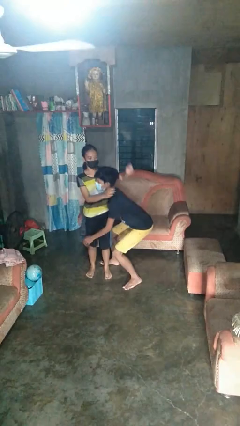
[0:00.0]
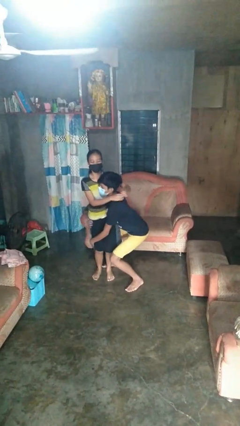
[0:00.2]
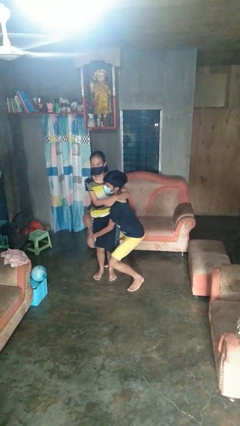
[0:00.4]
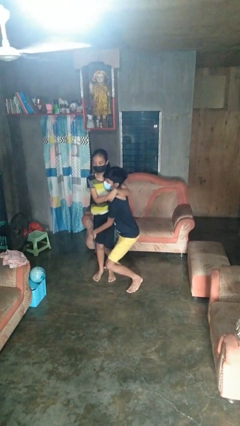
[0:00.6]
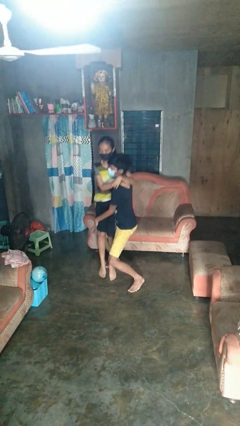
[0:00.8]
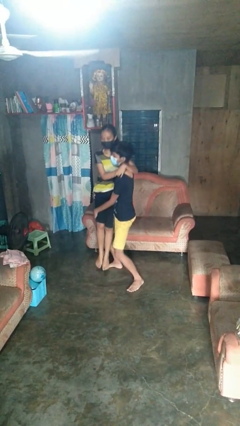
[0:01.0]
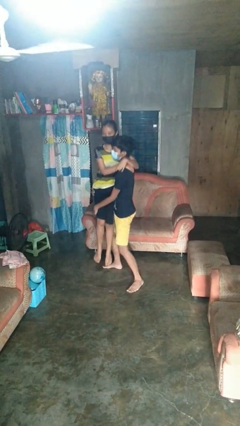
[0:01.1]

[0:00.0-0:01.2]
person picks up person

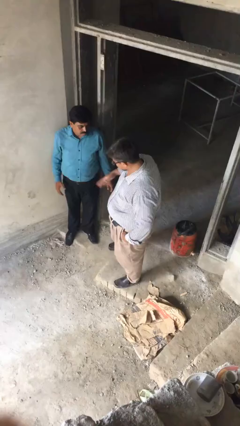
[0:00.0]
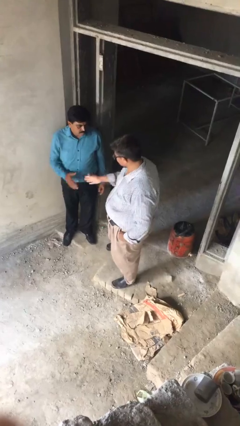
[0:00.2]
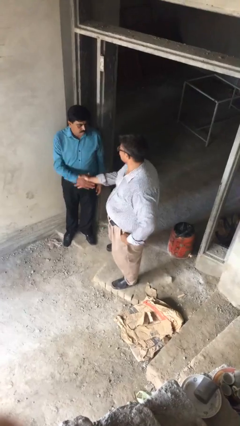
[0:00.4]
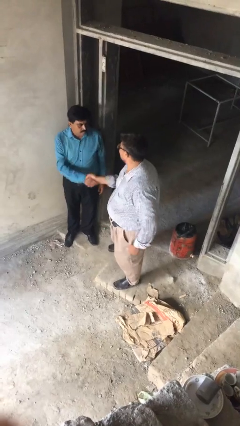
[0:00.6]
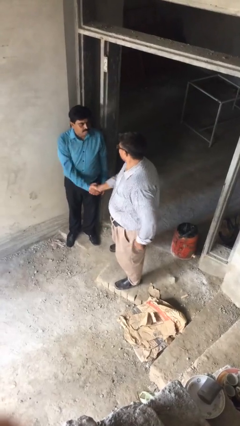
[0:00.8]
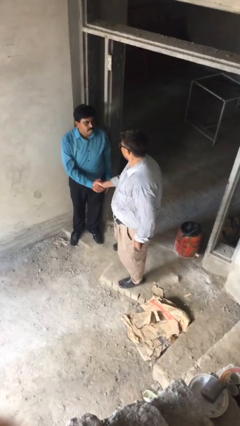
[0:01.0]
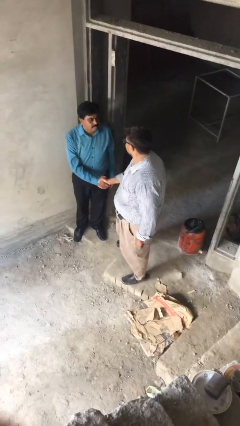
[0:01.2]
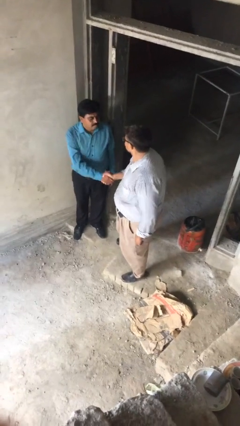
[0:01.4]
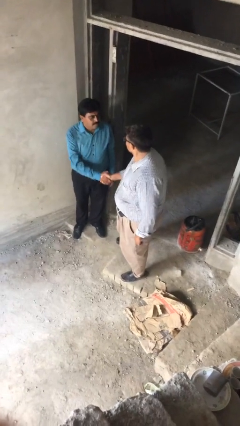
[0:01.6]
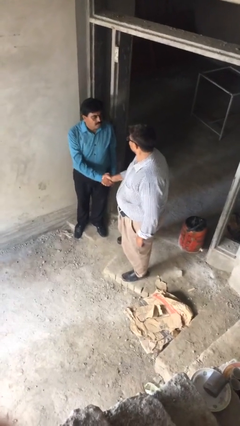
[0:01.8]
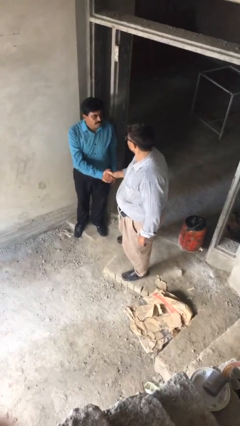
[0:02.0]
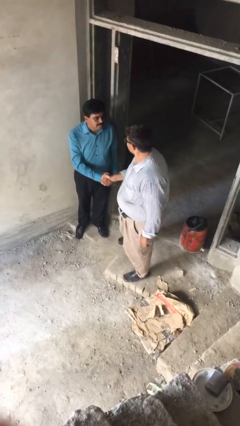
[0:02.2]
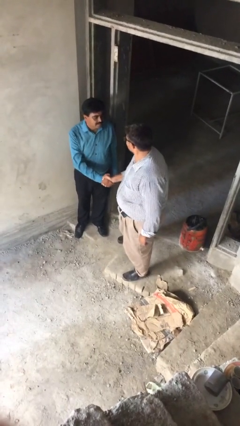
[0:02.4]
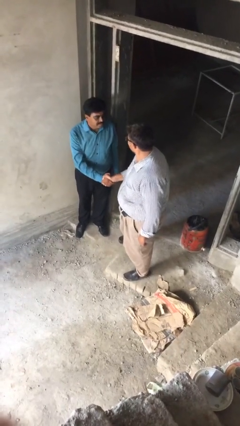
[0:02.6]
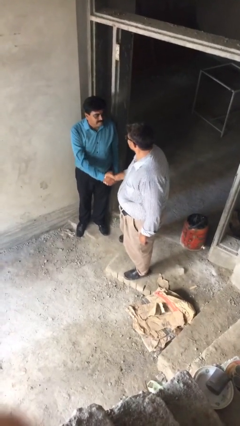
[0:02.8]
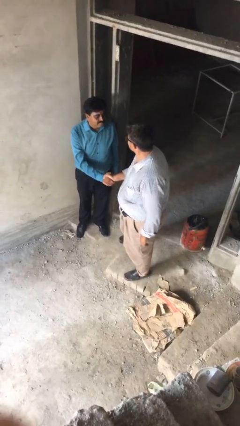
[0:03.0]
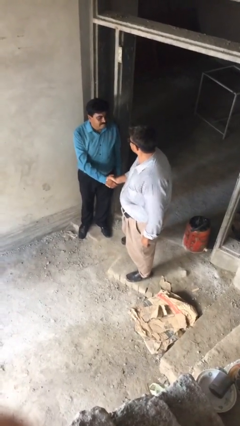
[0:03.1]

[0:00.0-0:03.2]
person shakes hand

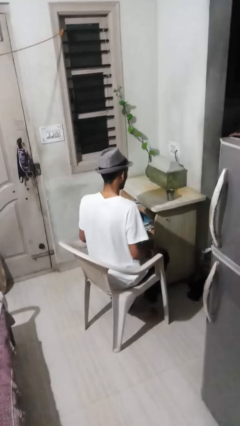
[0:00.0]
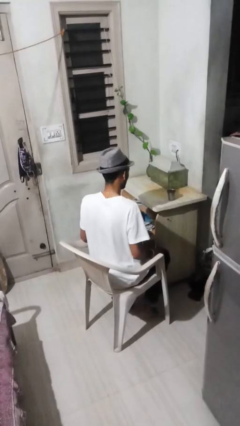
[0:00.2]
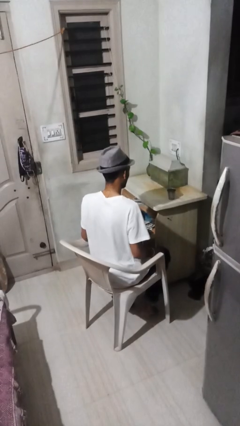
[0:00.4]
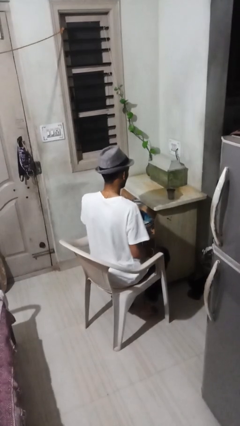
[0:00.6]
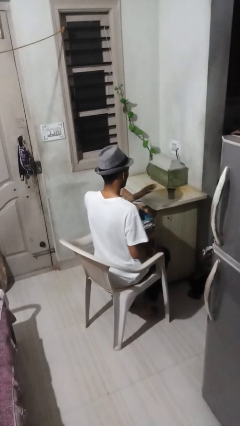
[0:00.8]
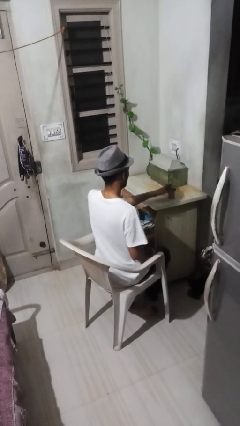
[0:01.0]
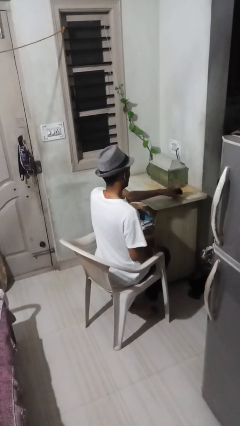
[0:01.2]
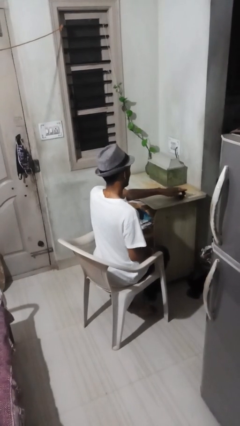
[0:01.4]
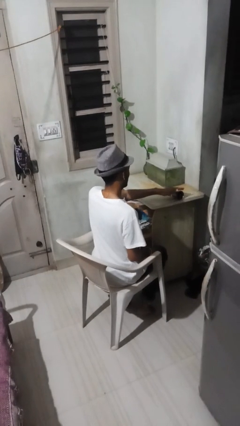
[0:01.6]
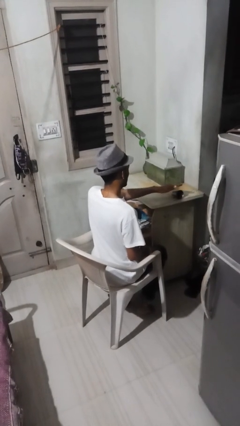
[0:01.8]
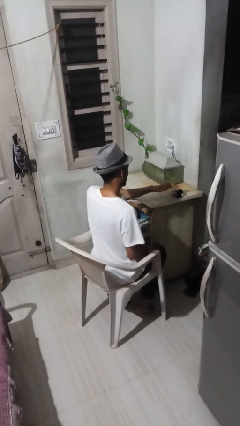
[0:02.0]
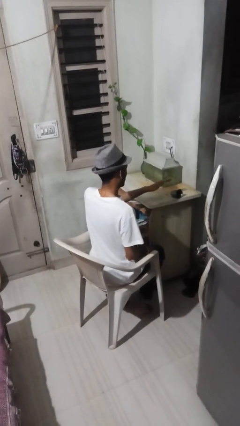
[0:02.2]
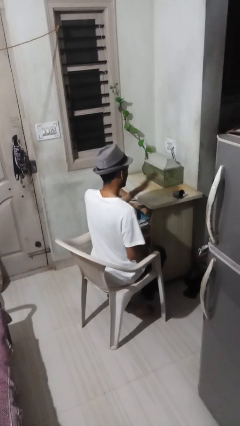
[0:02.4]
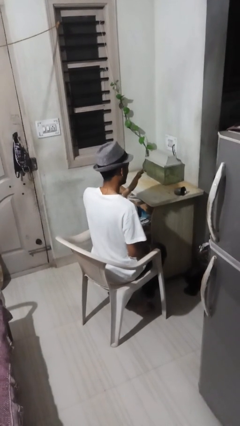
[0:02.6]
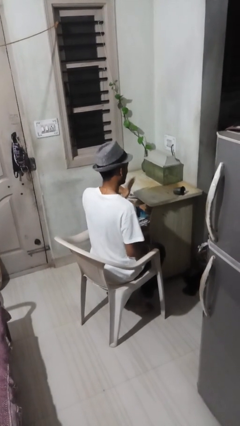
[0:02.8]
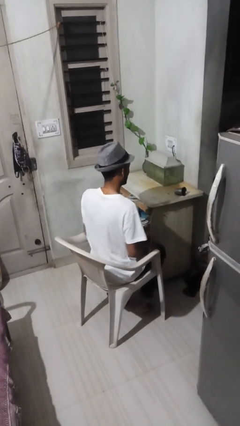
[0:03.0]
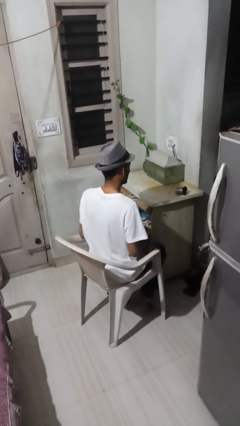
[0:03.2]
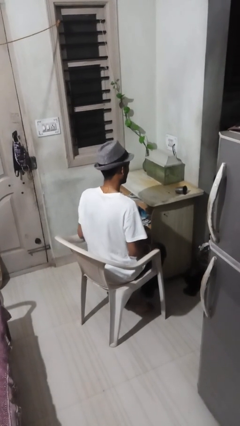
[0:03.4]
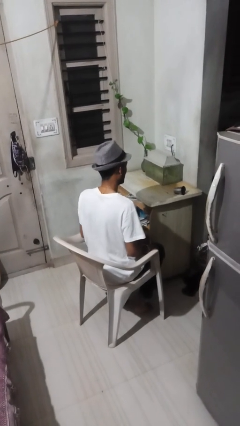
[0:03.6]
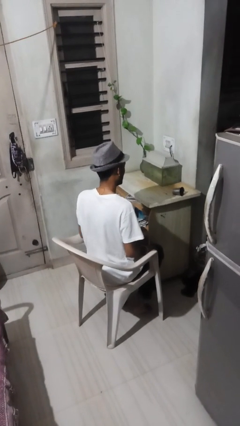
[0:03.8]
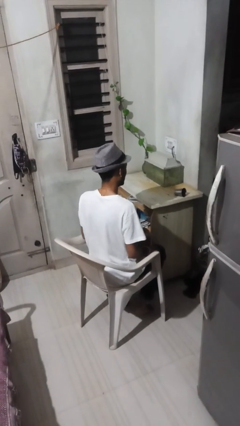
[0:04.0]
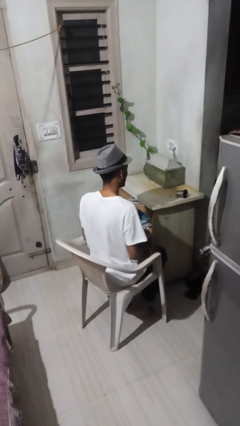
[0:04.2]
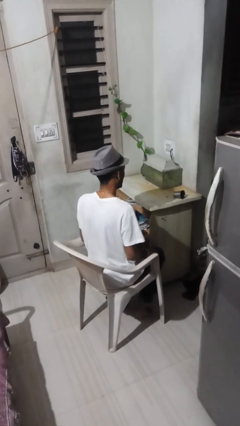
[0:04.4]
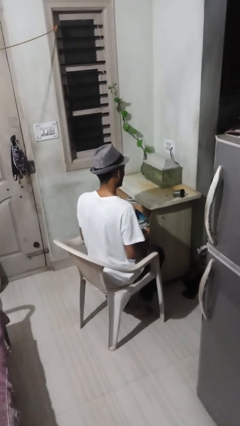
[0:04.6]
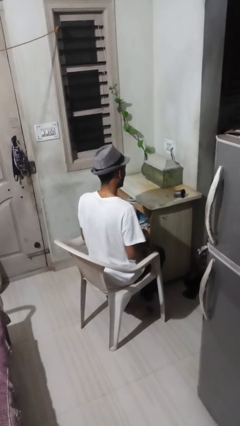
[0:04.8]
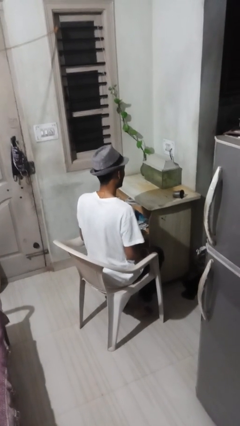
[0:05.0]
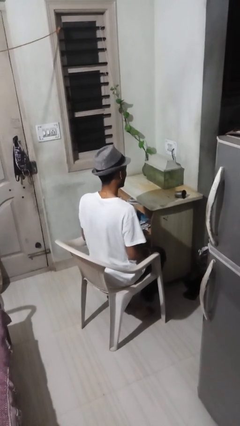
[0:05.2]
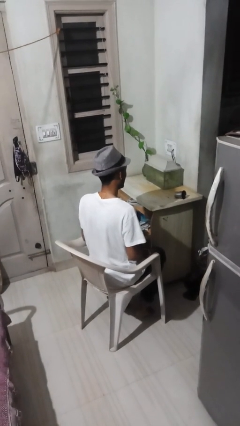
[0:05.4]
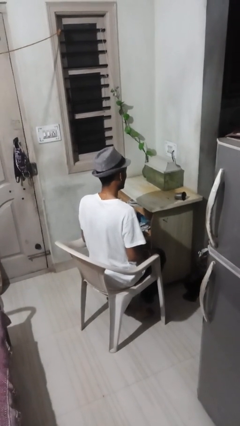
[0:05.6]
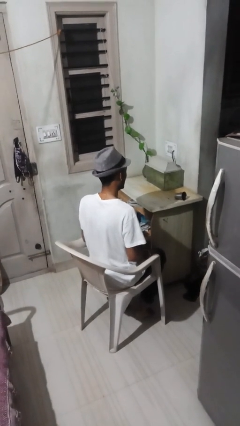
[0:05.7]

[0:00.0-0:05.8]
person spills on table

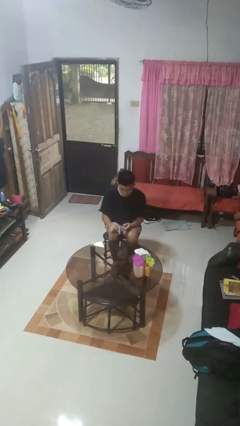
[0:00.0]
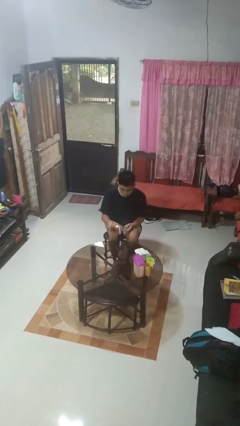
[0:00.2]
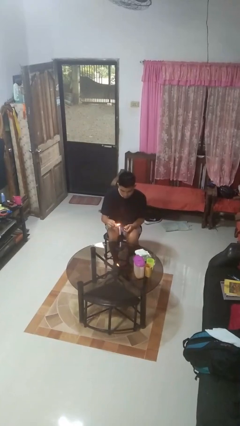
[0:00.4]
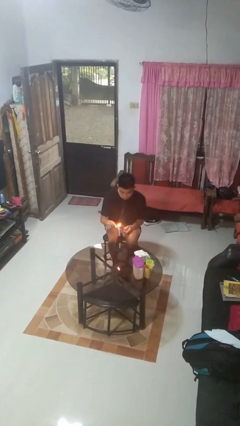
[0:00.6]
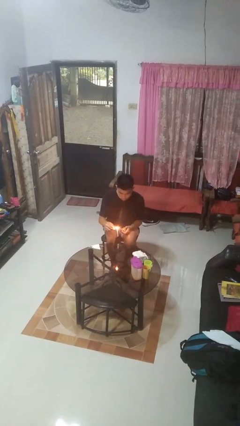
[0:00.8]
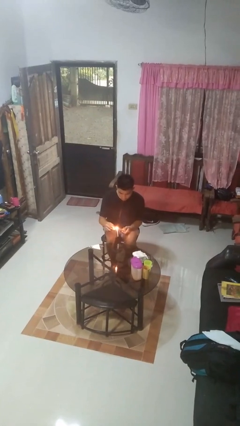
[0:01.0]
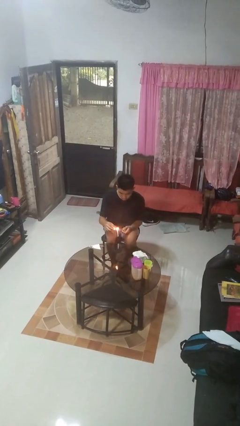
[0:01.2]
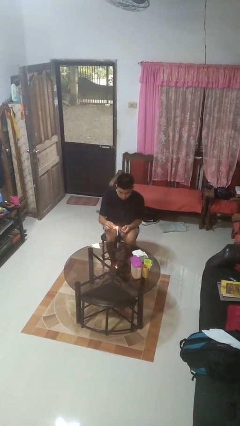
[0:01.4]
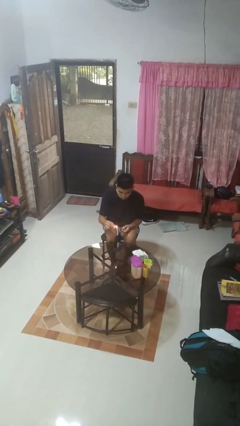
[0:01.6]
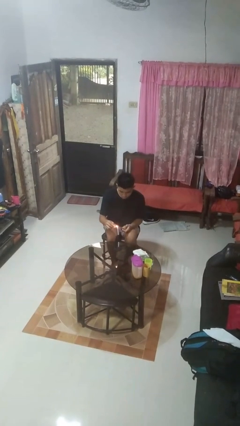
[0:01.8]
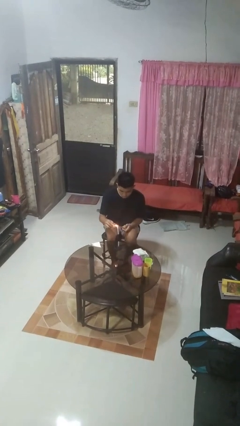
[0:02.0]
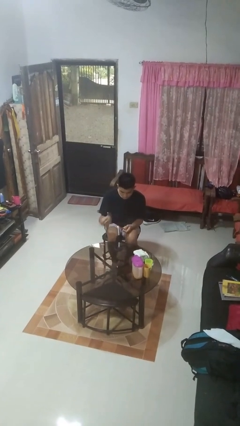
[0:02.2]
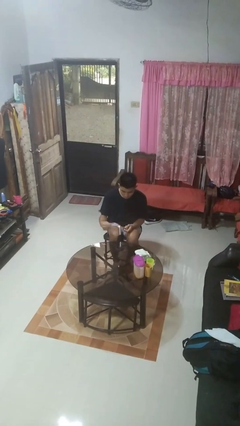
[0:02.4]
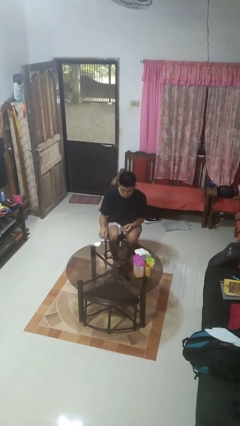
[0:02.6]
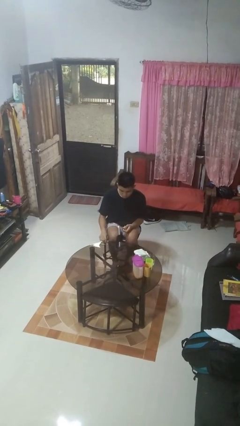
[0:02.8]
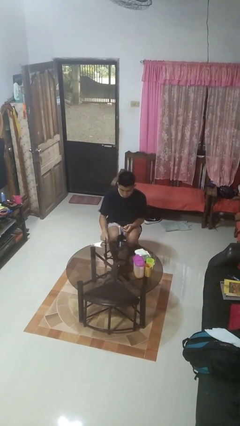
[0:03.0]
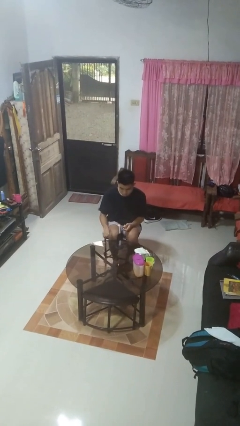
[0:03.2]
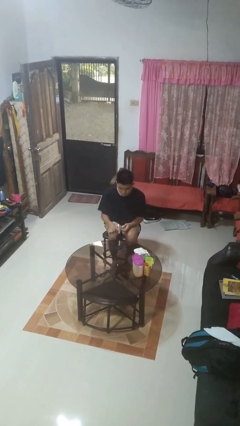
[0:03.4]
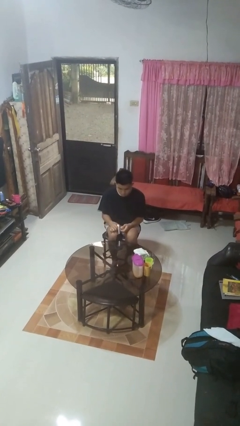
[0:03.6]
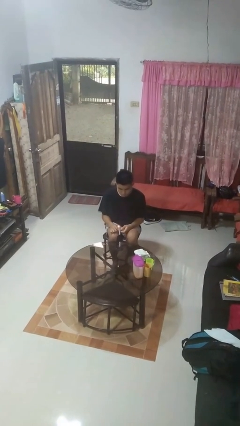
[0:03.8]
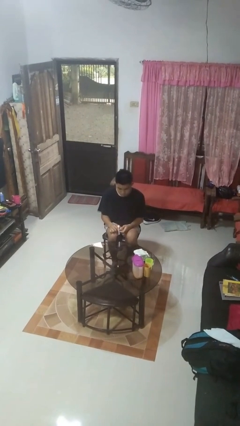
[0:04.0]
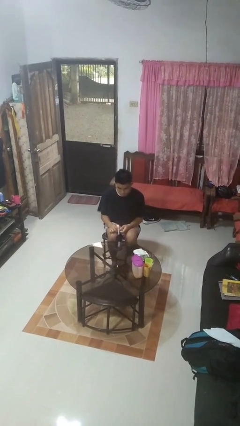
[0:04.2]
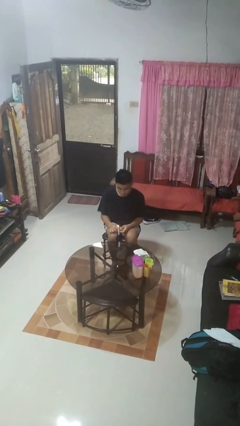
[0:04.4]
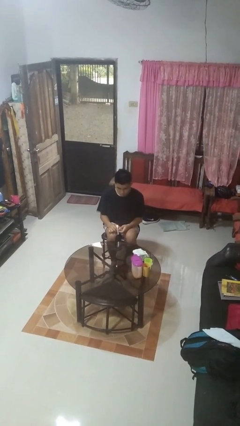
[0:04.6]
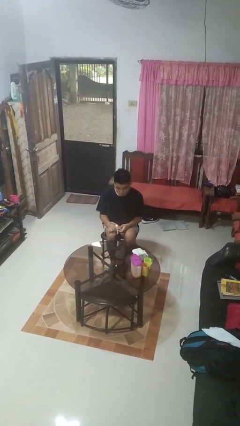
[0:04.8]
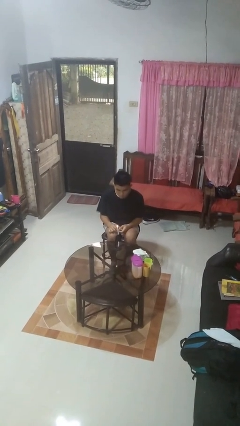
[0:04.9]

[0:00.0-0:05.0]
person lights candle

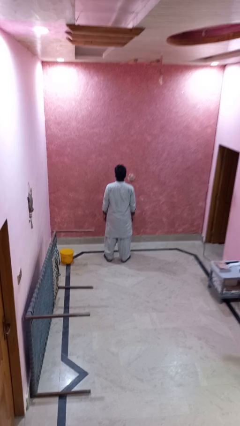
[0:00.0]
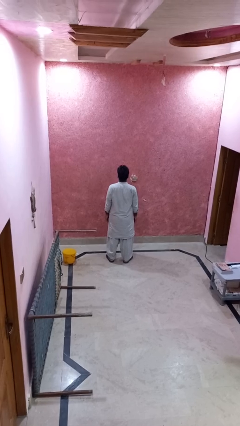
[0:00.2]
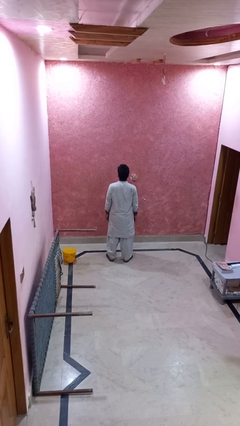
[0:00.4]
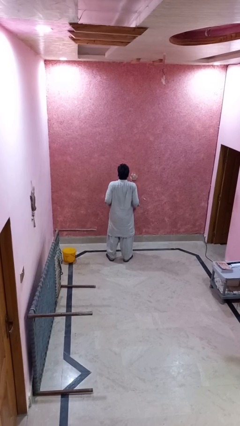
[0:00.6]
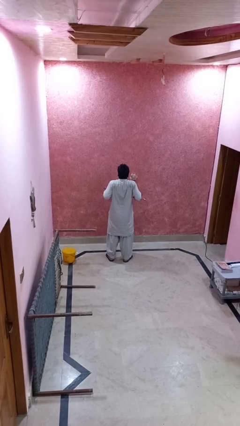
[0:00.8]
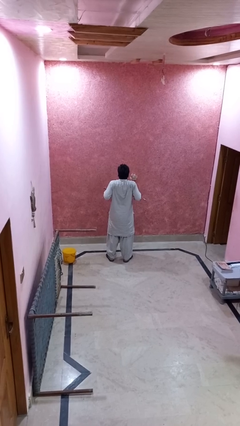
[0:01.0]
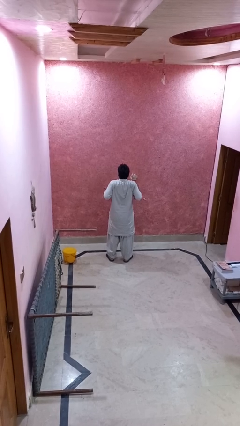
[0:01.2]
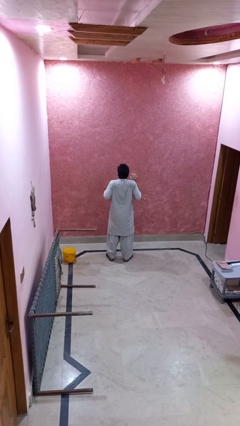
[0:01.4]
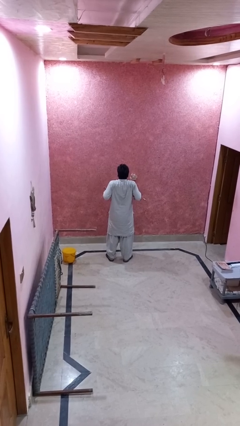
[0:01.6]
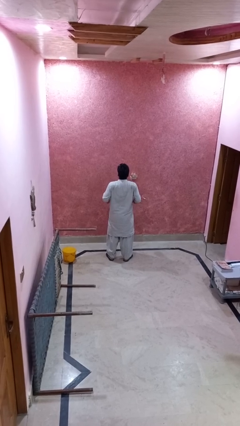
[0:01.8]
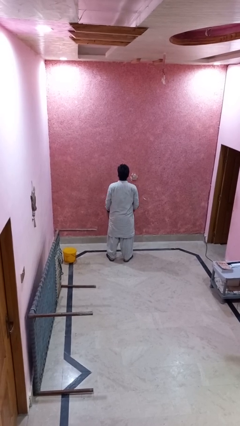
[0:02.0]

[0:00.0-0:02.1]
person shrugs
